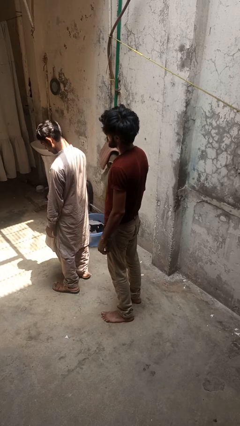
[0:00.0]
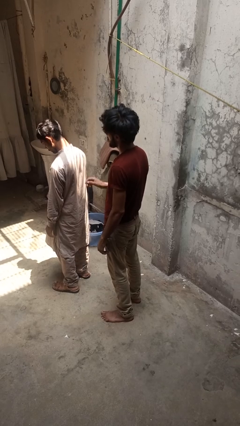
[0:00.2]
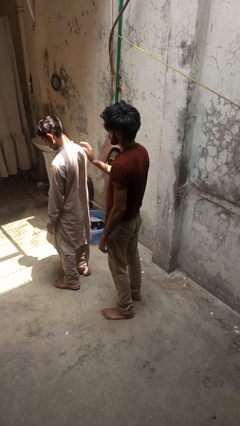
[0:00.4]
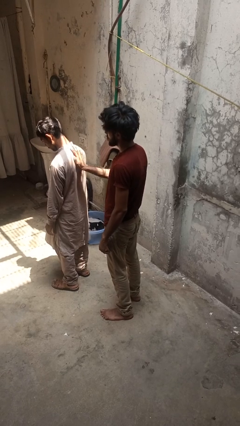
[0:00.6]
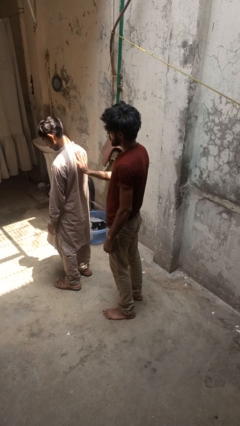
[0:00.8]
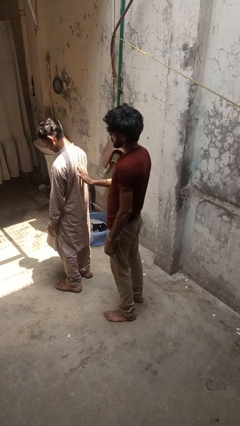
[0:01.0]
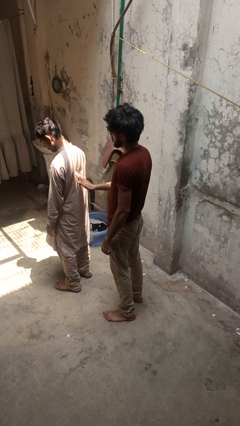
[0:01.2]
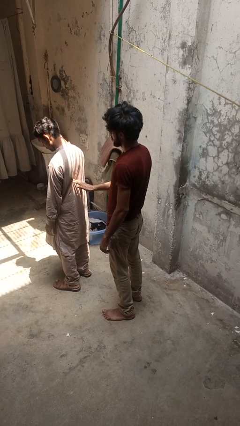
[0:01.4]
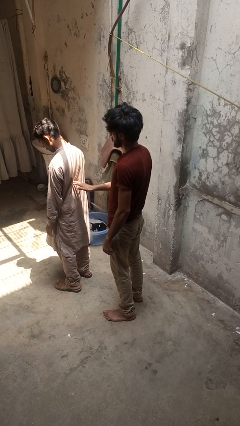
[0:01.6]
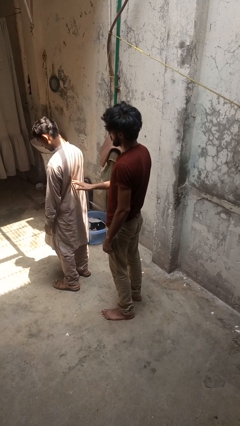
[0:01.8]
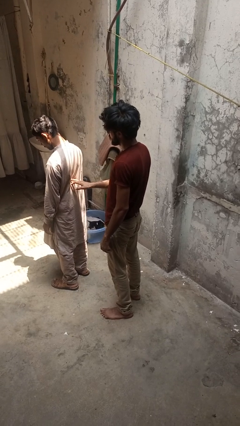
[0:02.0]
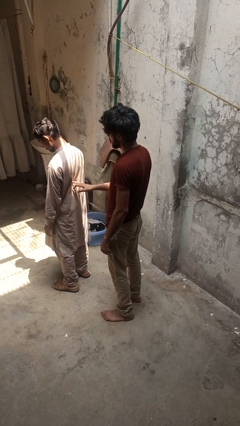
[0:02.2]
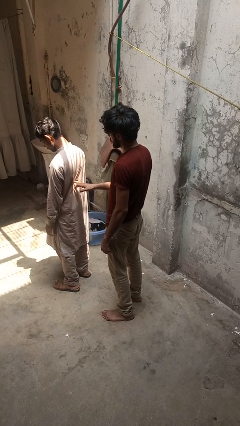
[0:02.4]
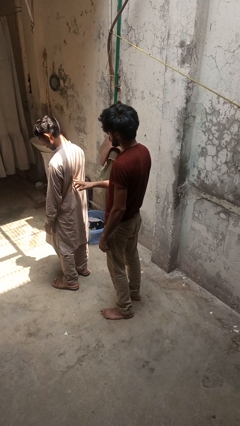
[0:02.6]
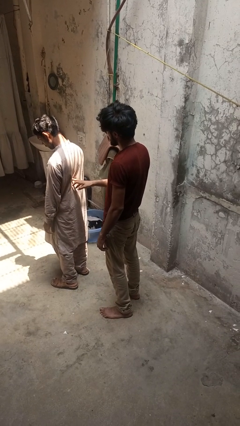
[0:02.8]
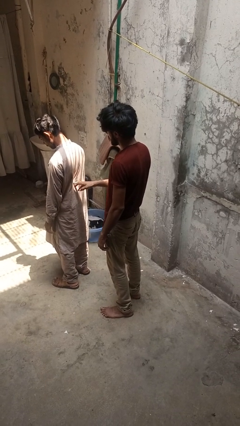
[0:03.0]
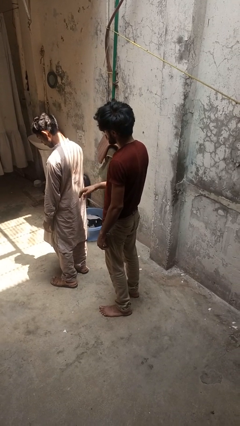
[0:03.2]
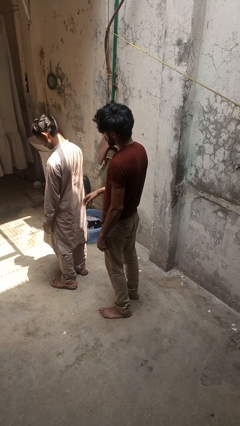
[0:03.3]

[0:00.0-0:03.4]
person touches back of person

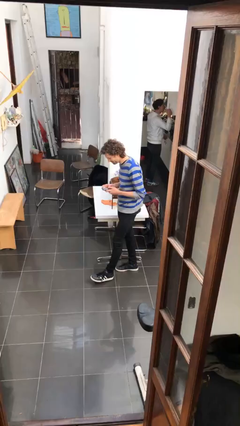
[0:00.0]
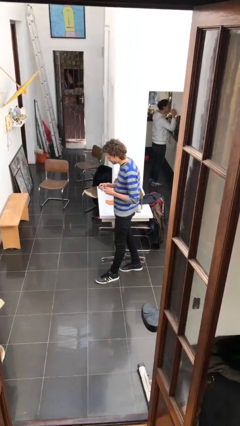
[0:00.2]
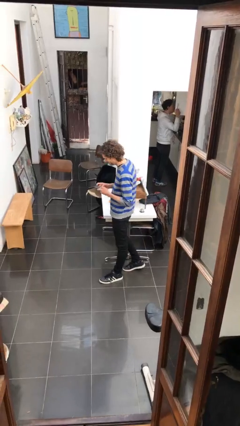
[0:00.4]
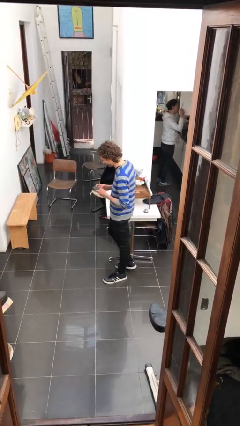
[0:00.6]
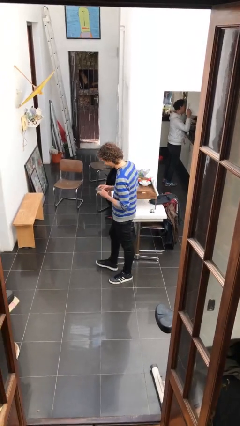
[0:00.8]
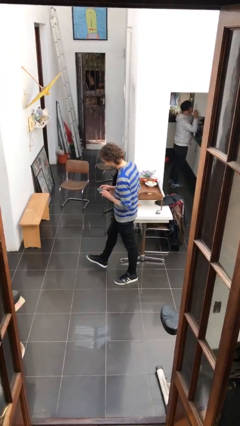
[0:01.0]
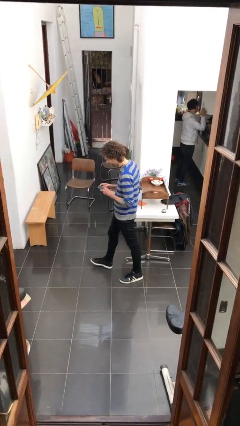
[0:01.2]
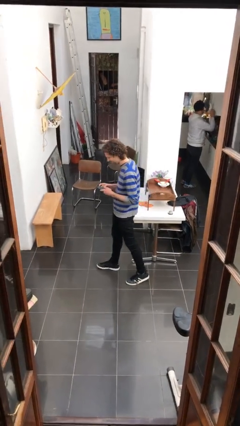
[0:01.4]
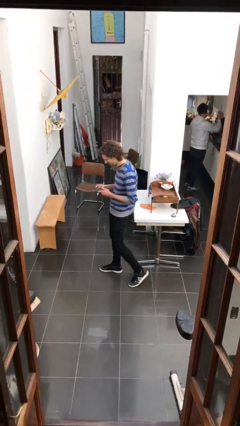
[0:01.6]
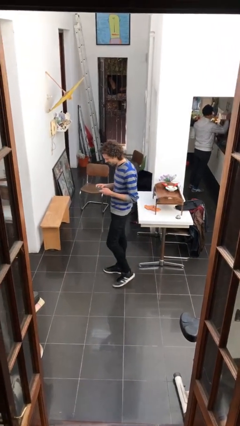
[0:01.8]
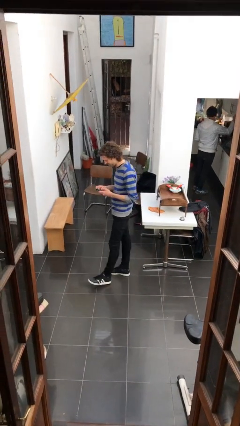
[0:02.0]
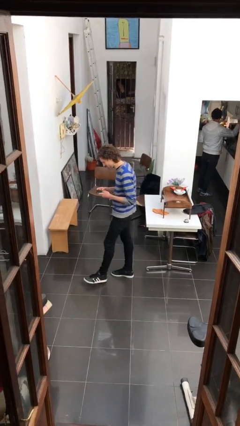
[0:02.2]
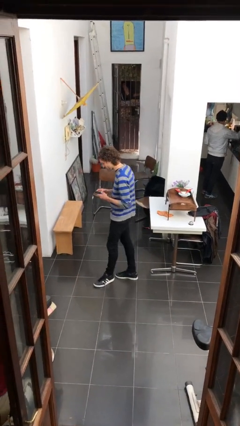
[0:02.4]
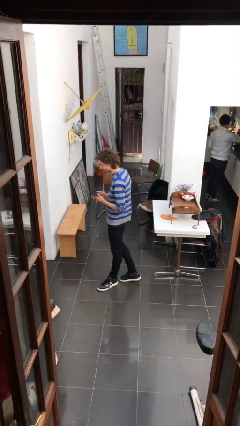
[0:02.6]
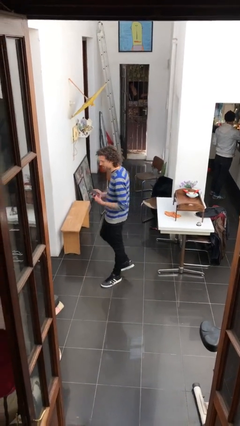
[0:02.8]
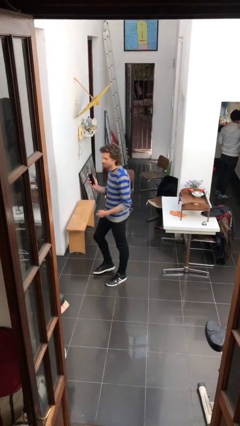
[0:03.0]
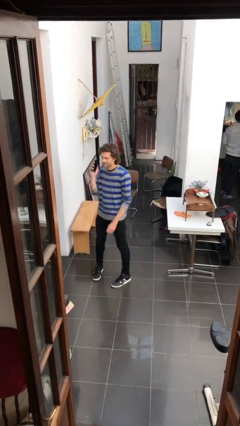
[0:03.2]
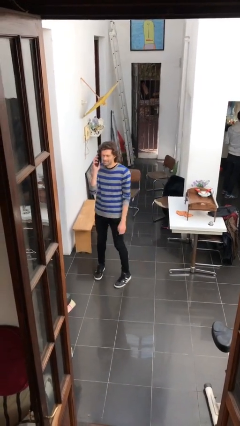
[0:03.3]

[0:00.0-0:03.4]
person texts on phone

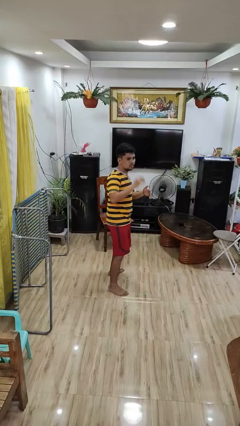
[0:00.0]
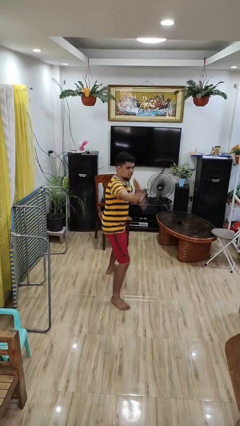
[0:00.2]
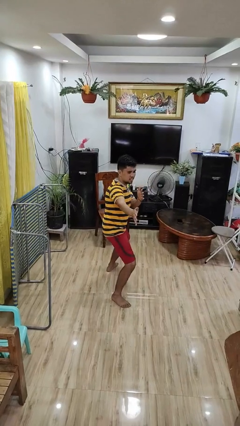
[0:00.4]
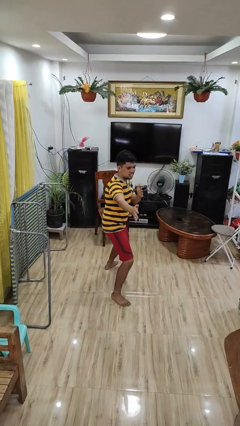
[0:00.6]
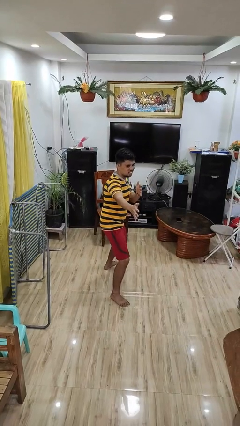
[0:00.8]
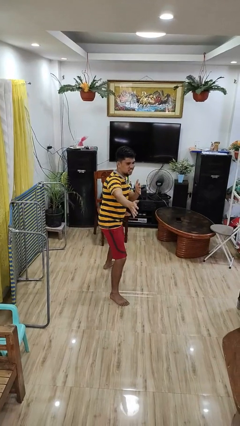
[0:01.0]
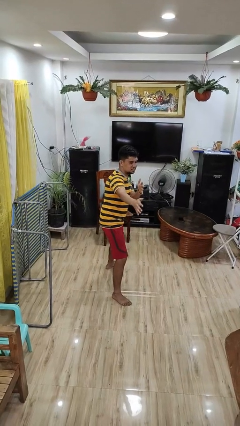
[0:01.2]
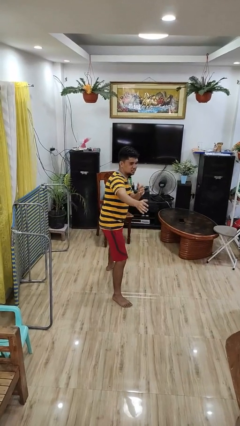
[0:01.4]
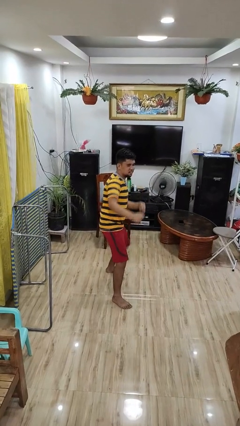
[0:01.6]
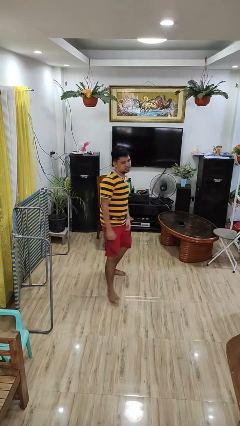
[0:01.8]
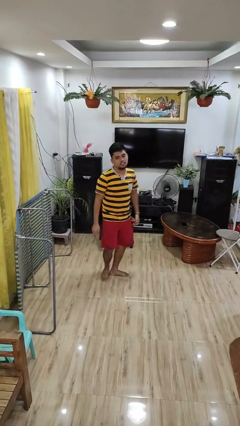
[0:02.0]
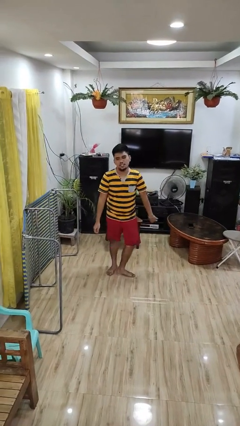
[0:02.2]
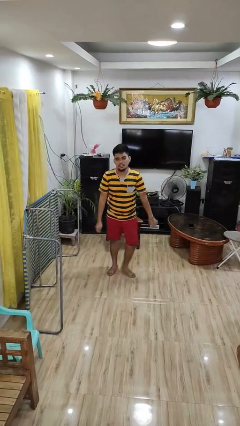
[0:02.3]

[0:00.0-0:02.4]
person karate chop

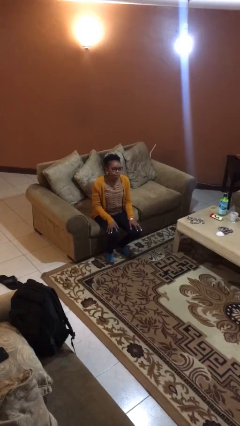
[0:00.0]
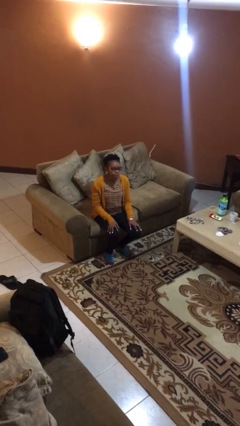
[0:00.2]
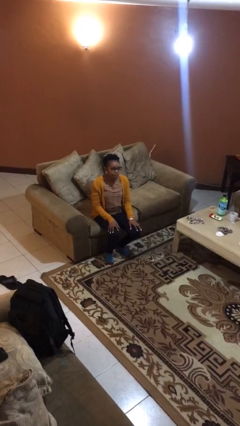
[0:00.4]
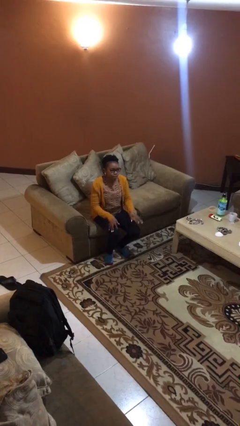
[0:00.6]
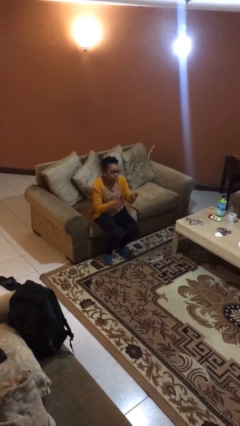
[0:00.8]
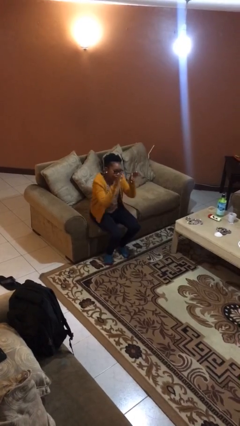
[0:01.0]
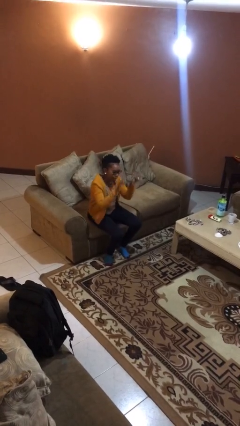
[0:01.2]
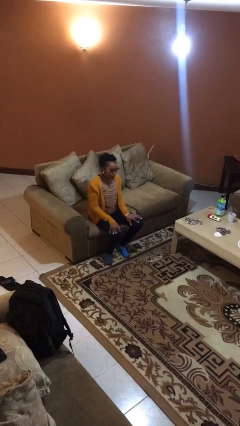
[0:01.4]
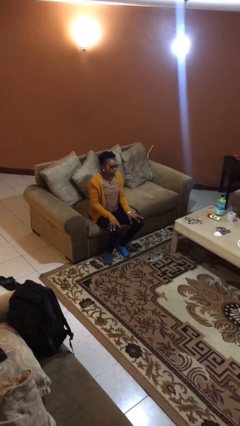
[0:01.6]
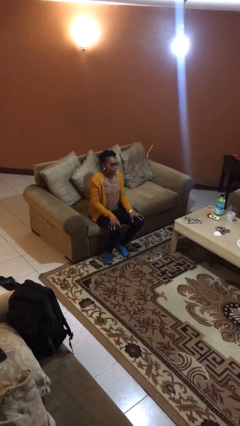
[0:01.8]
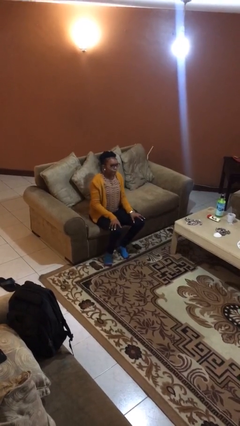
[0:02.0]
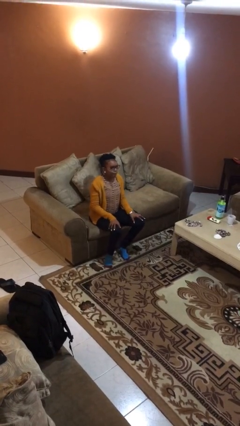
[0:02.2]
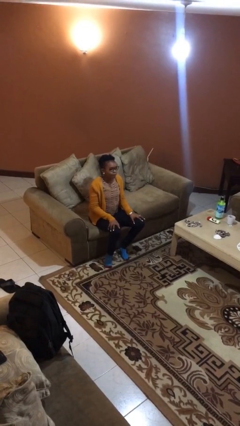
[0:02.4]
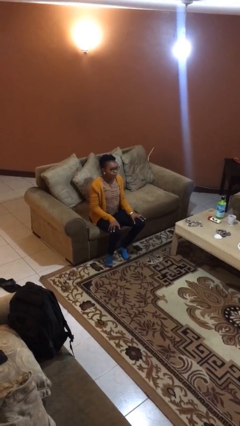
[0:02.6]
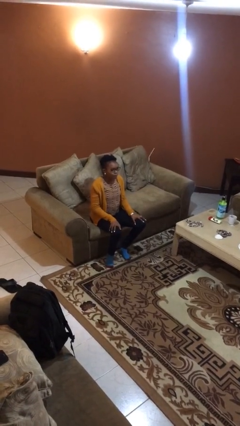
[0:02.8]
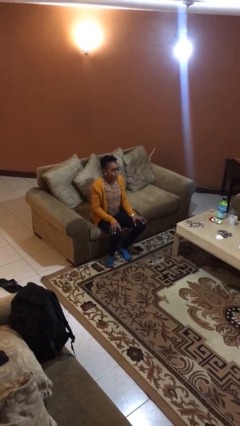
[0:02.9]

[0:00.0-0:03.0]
person slaps hands on thighs

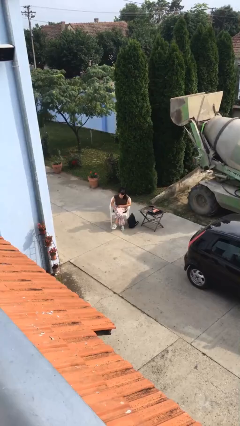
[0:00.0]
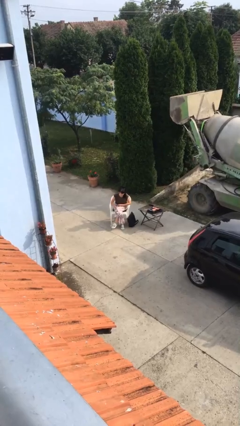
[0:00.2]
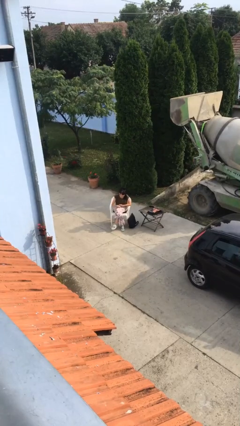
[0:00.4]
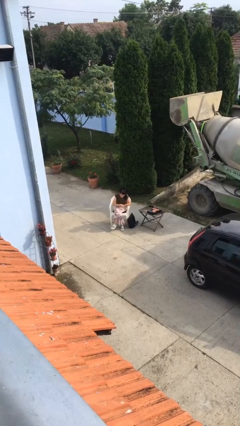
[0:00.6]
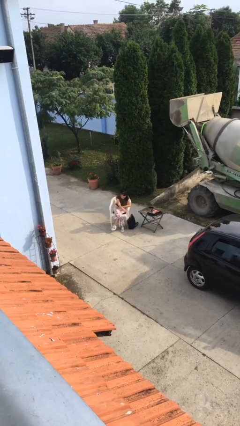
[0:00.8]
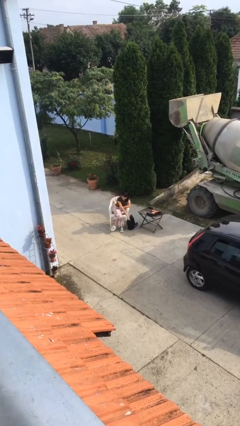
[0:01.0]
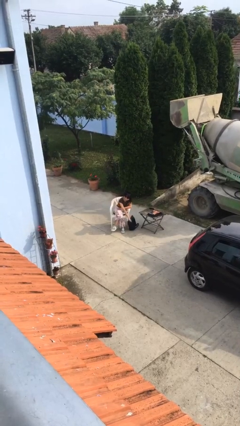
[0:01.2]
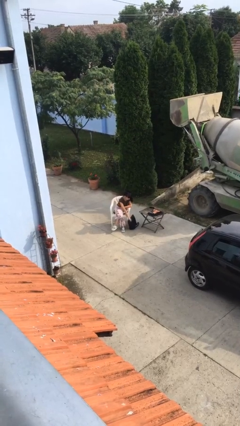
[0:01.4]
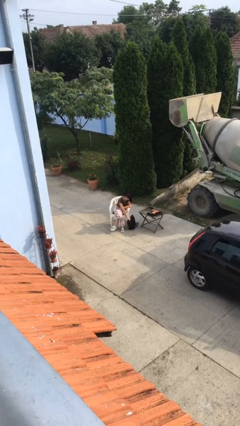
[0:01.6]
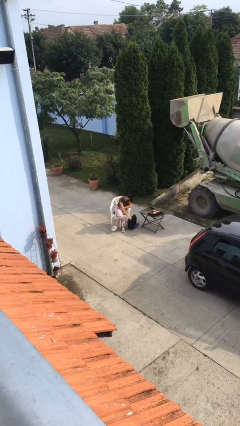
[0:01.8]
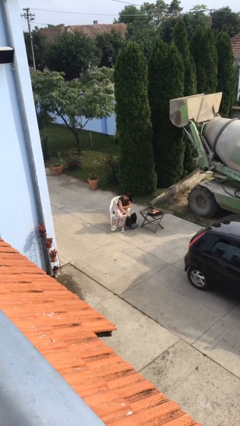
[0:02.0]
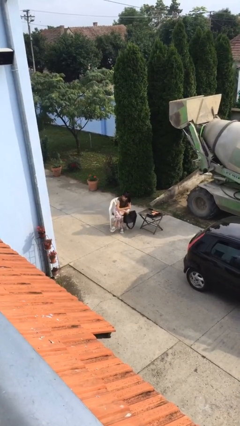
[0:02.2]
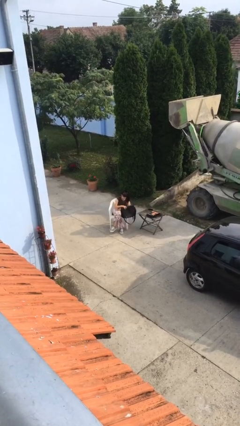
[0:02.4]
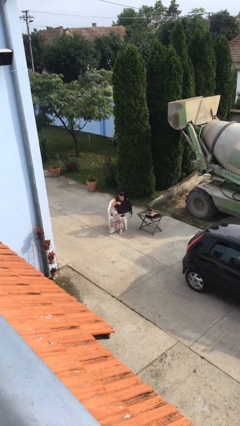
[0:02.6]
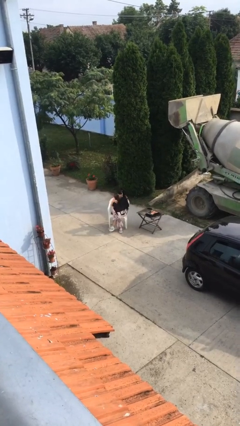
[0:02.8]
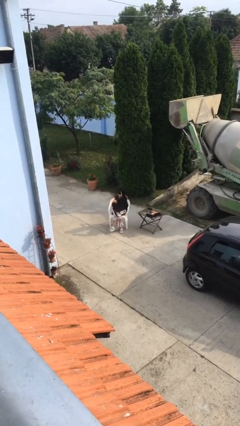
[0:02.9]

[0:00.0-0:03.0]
person picks up object from floor

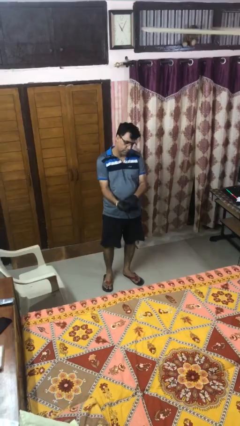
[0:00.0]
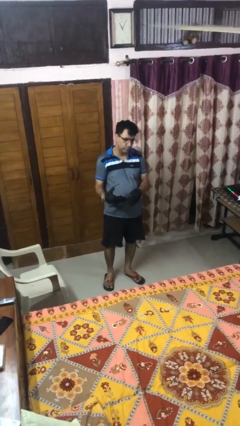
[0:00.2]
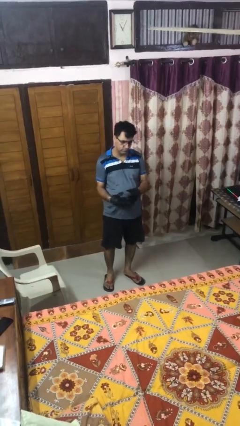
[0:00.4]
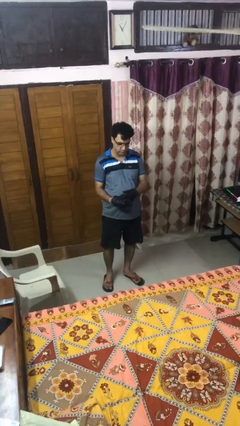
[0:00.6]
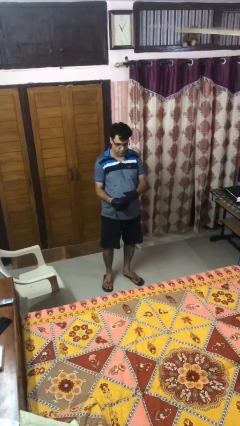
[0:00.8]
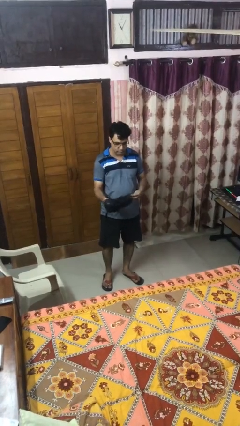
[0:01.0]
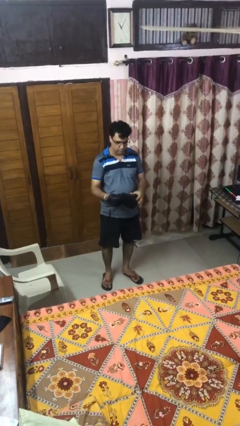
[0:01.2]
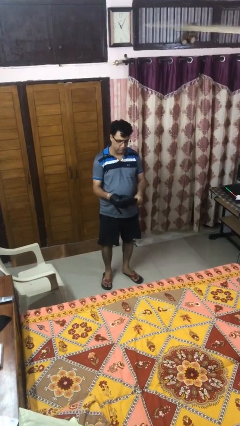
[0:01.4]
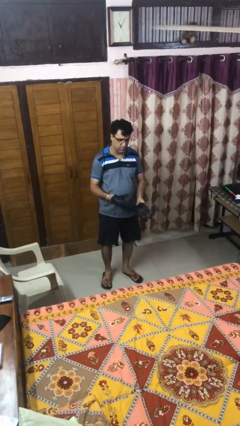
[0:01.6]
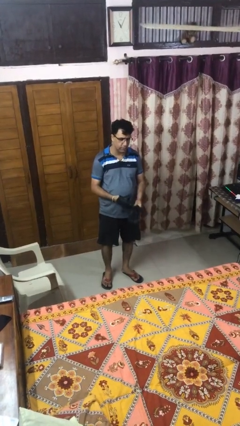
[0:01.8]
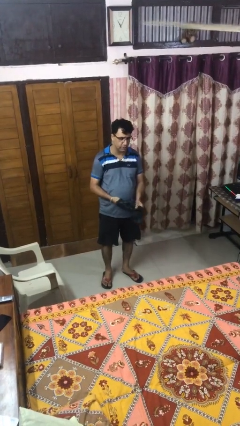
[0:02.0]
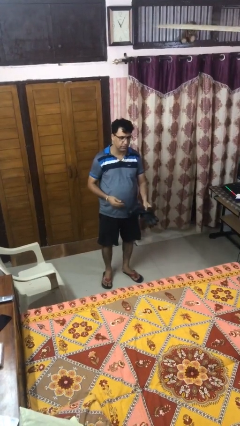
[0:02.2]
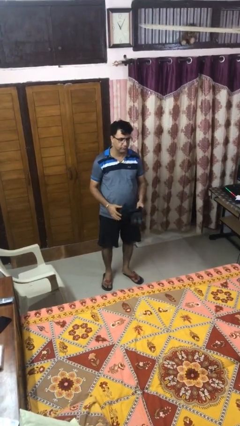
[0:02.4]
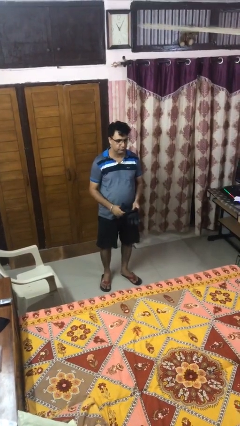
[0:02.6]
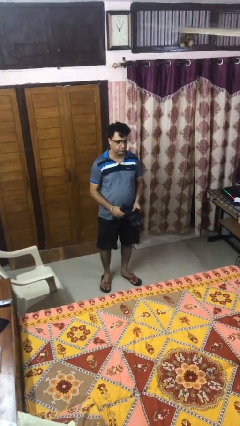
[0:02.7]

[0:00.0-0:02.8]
person takes off gloves
